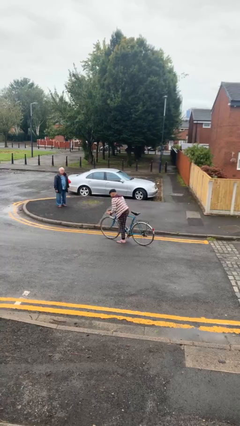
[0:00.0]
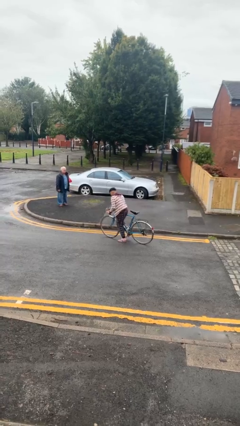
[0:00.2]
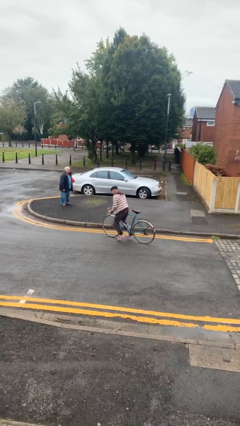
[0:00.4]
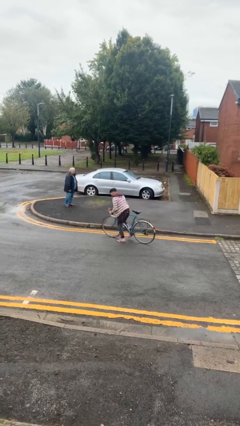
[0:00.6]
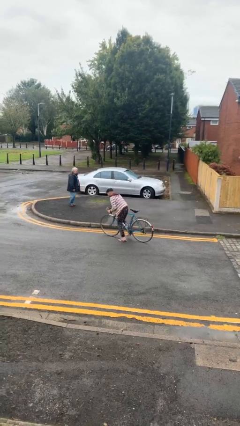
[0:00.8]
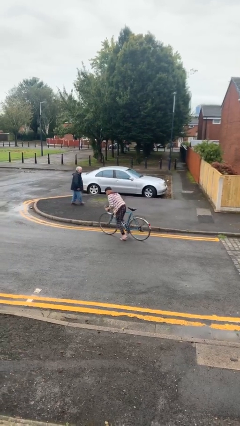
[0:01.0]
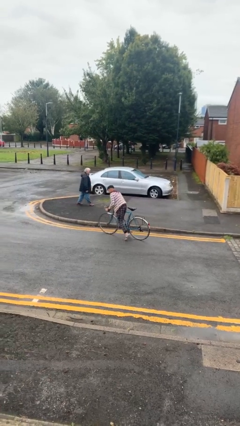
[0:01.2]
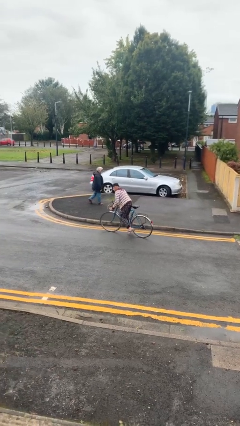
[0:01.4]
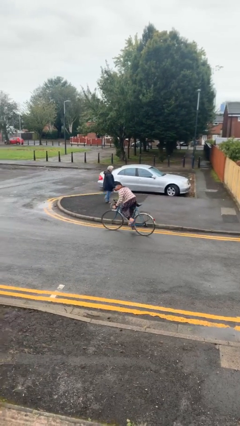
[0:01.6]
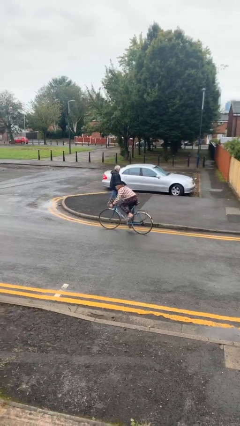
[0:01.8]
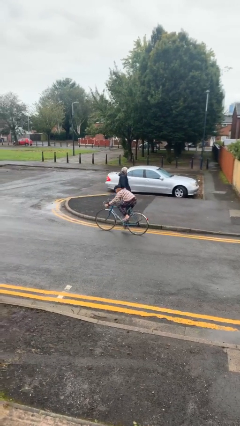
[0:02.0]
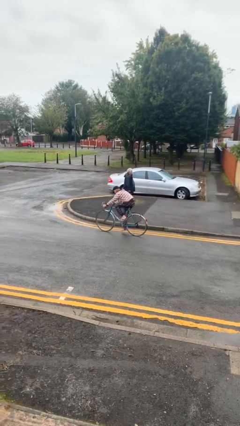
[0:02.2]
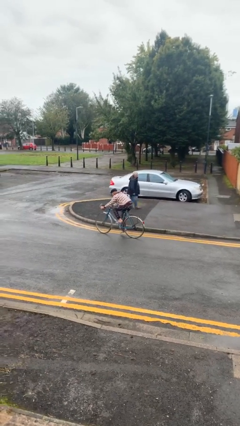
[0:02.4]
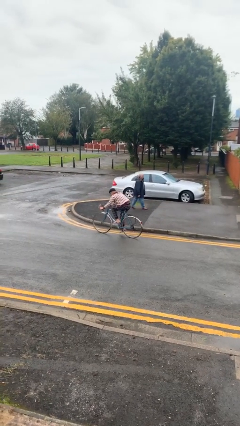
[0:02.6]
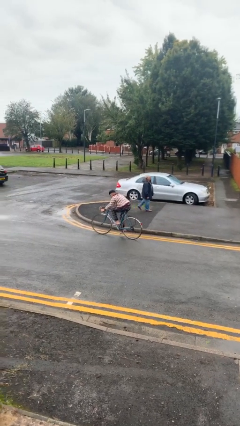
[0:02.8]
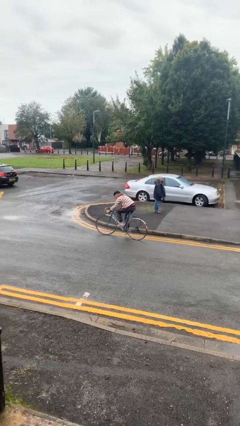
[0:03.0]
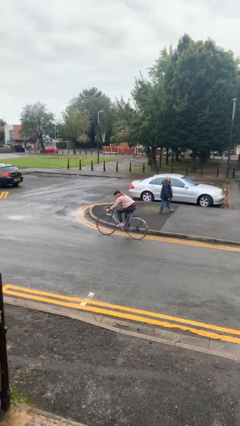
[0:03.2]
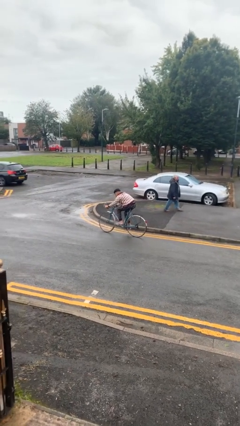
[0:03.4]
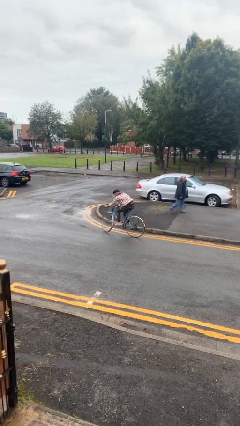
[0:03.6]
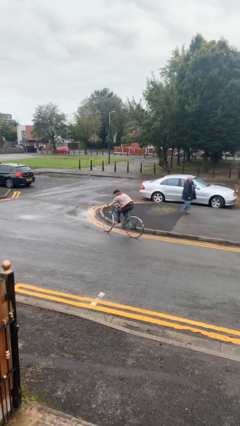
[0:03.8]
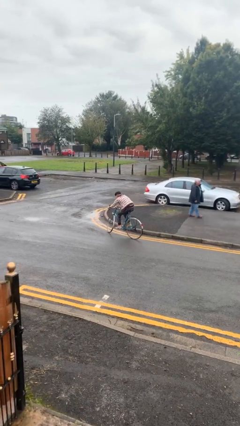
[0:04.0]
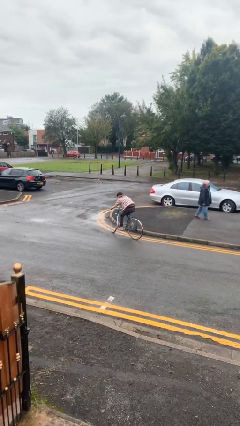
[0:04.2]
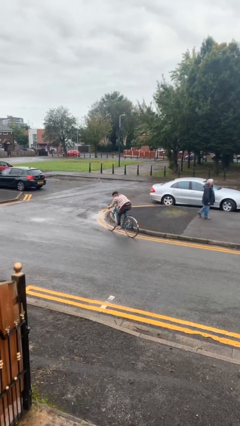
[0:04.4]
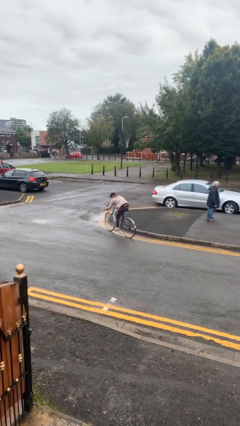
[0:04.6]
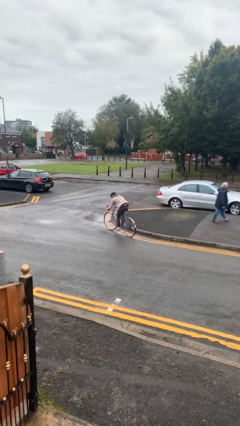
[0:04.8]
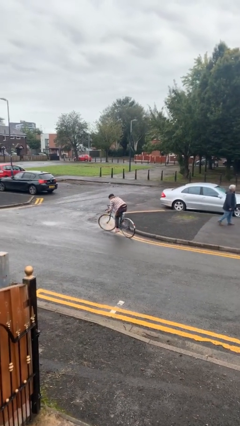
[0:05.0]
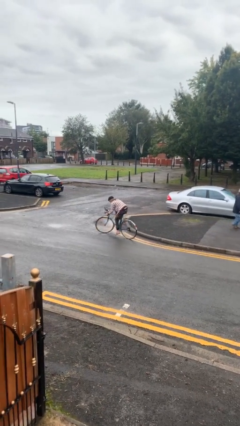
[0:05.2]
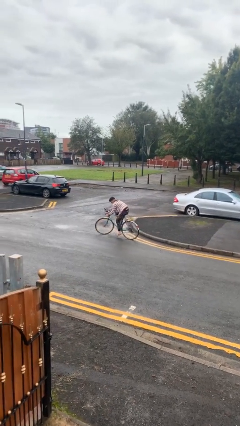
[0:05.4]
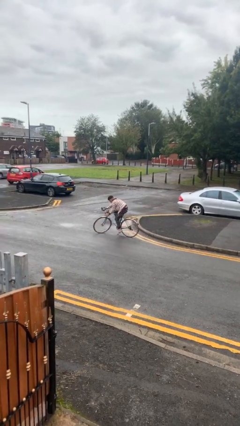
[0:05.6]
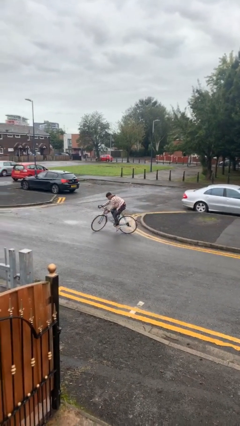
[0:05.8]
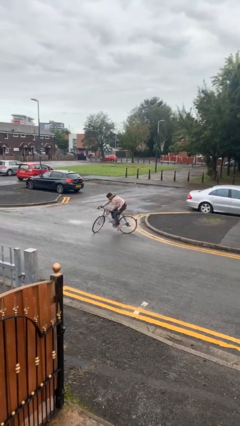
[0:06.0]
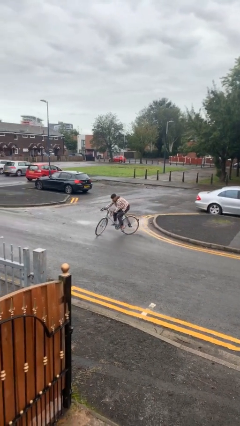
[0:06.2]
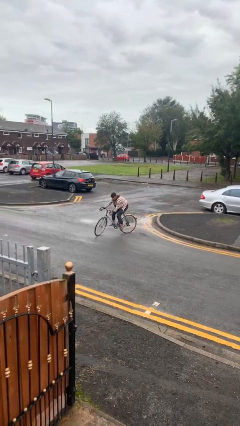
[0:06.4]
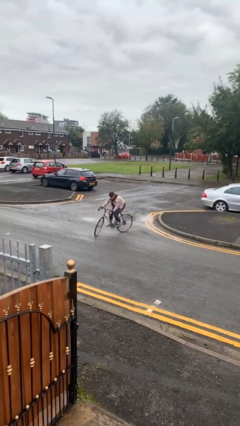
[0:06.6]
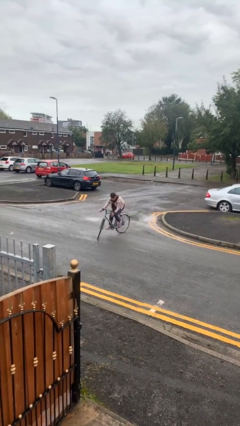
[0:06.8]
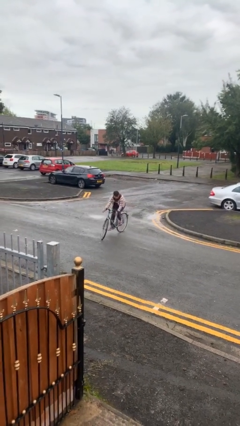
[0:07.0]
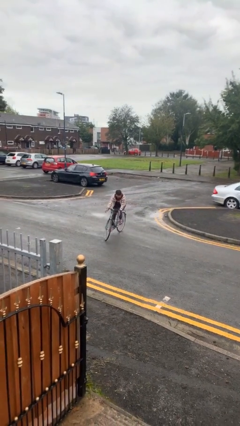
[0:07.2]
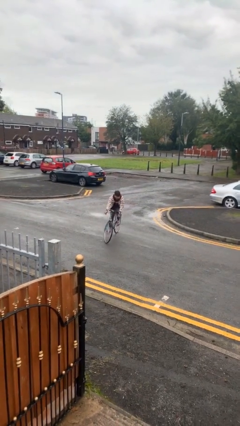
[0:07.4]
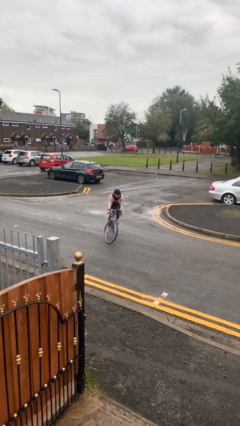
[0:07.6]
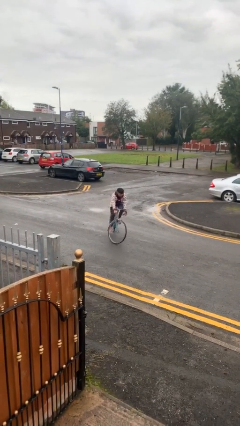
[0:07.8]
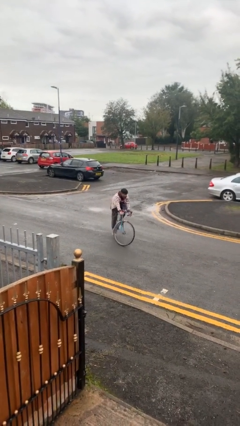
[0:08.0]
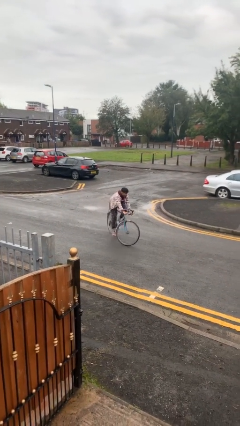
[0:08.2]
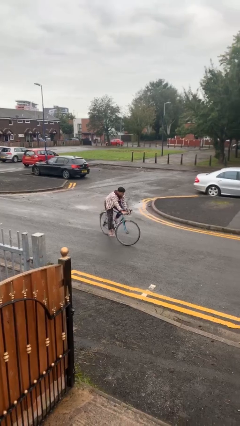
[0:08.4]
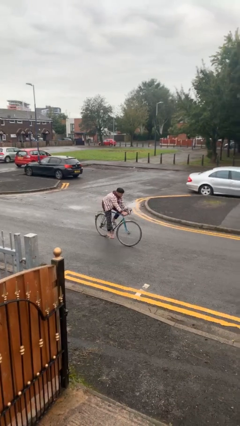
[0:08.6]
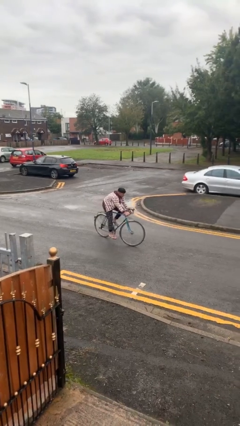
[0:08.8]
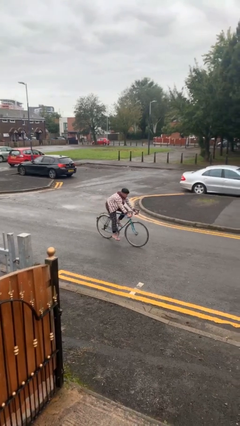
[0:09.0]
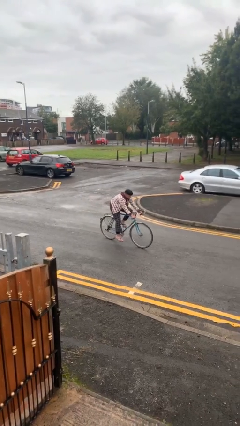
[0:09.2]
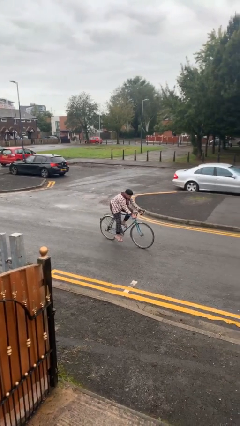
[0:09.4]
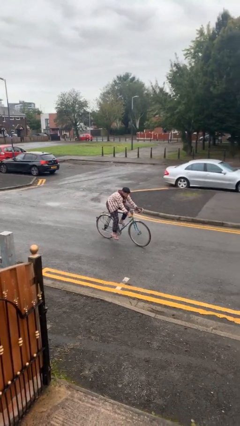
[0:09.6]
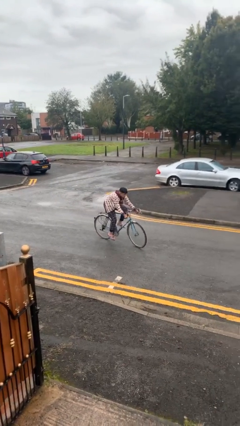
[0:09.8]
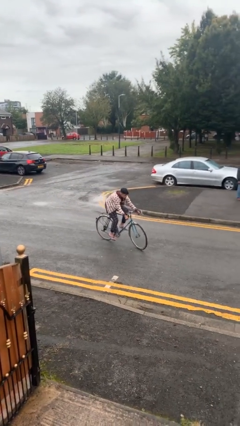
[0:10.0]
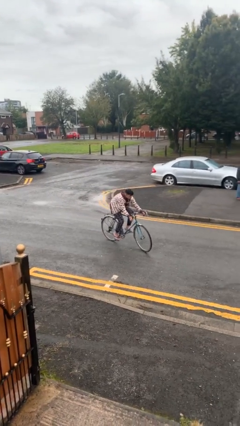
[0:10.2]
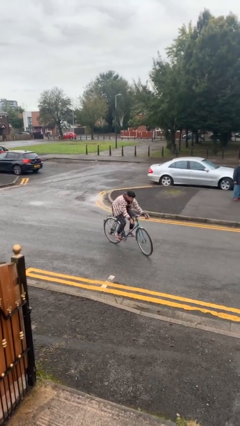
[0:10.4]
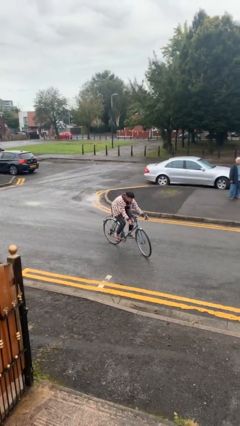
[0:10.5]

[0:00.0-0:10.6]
person rides bicycle

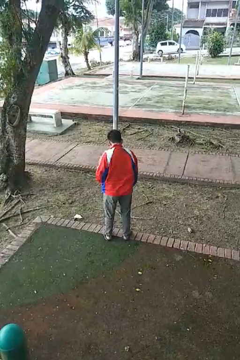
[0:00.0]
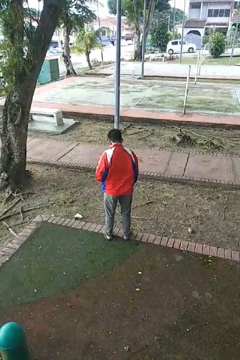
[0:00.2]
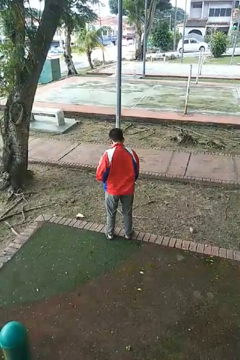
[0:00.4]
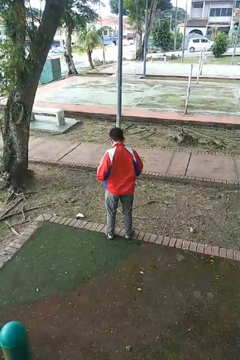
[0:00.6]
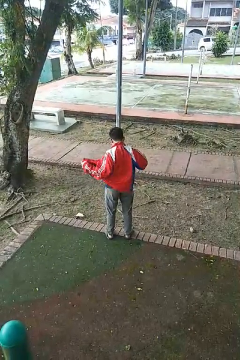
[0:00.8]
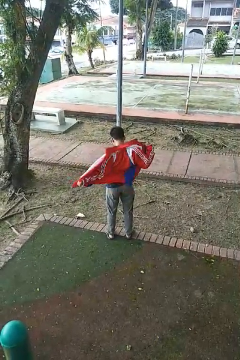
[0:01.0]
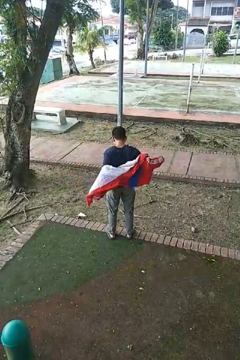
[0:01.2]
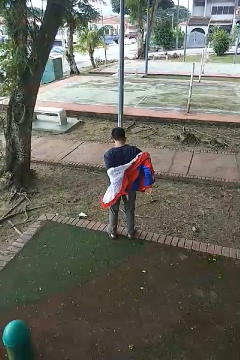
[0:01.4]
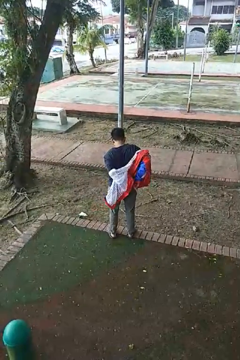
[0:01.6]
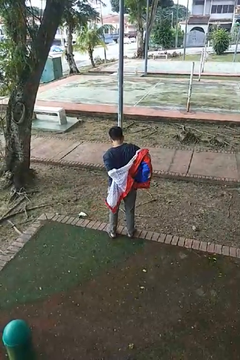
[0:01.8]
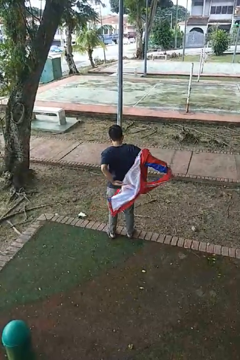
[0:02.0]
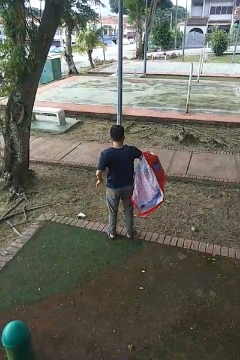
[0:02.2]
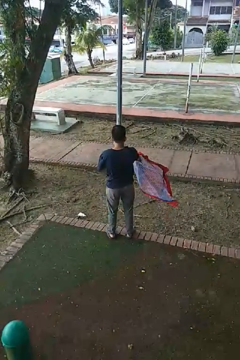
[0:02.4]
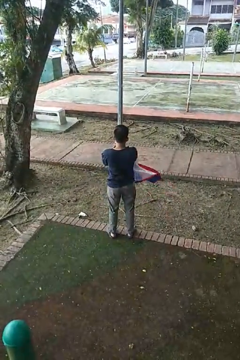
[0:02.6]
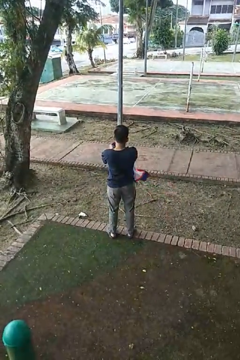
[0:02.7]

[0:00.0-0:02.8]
person takes off jacket

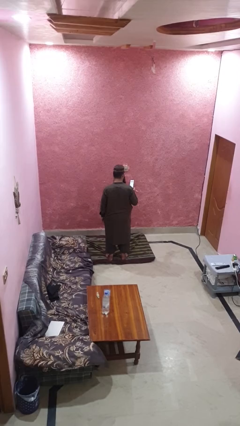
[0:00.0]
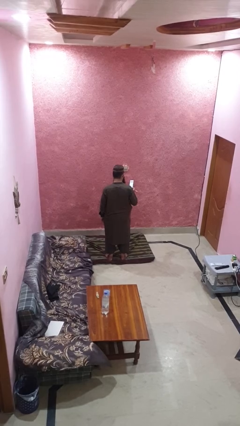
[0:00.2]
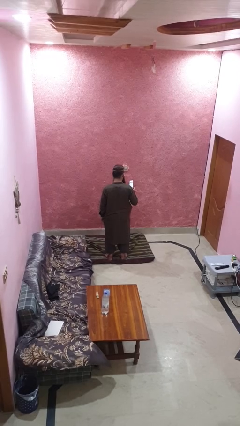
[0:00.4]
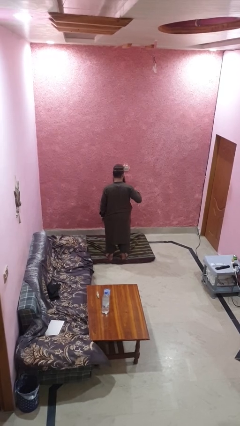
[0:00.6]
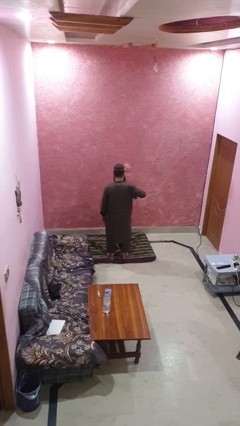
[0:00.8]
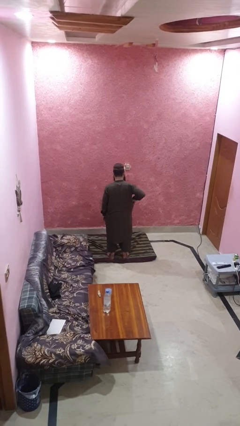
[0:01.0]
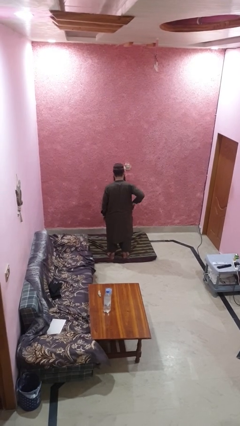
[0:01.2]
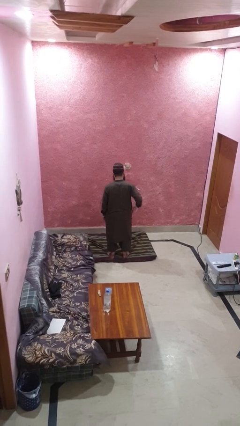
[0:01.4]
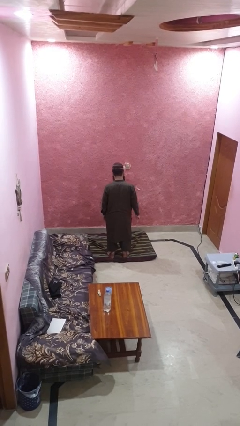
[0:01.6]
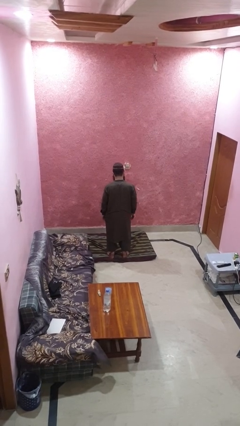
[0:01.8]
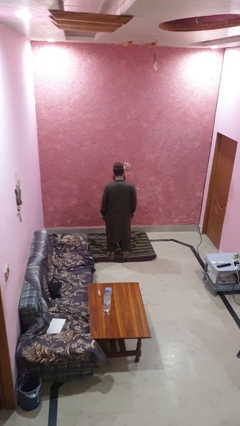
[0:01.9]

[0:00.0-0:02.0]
person puts phone into pocket

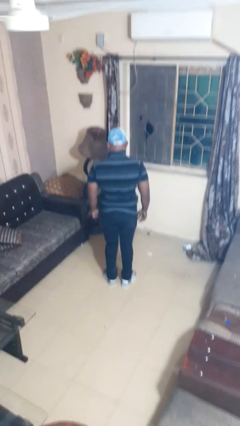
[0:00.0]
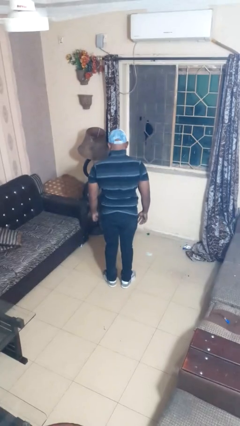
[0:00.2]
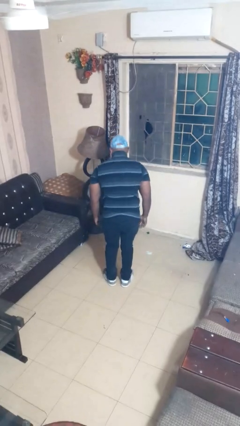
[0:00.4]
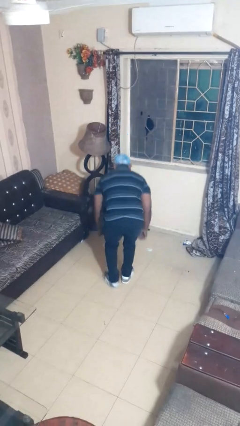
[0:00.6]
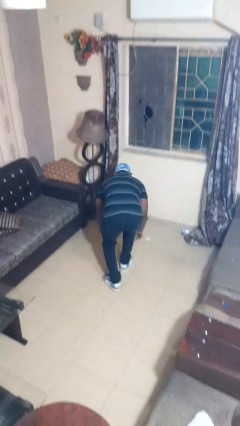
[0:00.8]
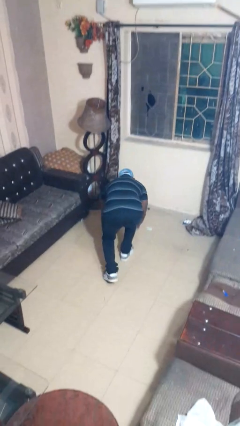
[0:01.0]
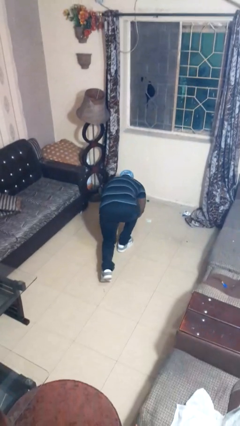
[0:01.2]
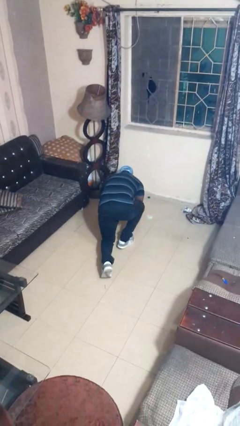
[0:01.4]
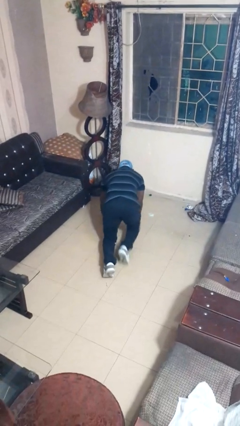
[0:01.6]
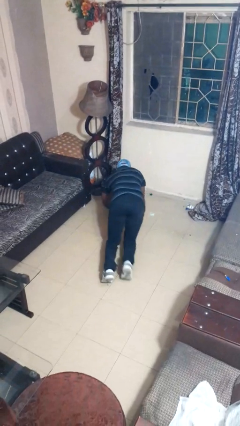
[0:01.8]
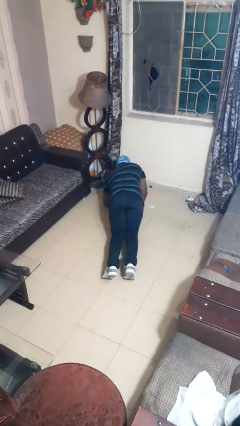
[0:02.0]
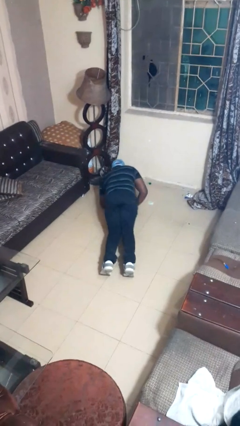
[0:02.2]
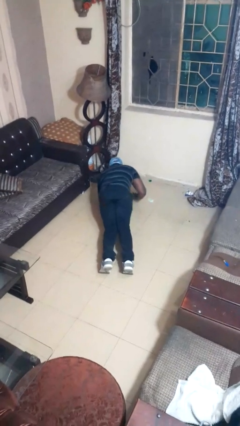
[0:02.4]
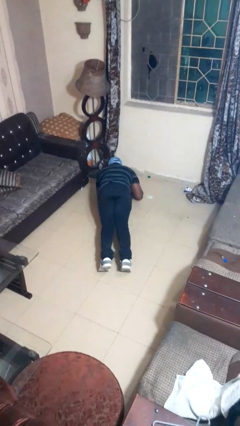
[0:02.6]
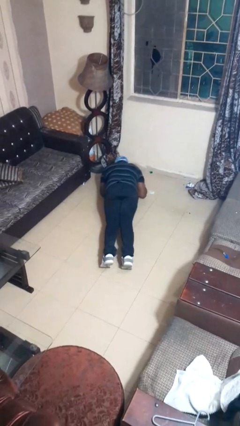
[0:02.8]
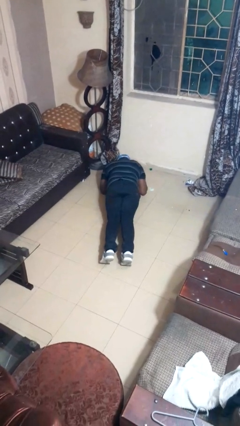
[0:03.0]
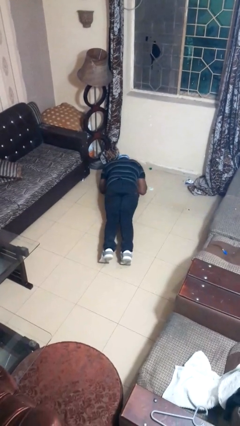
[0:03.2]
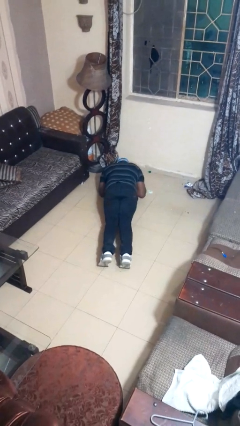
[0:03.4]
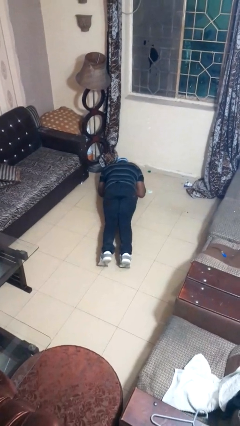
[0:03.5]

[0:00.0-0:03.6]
person exercises with plank
